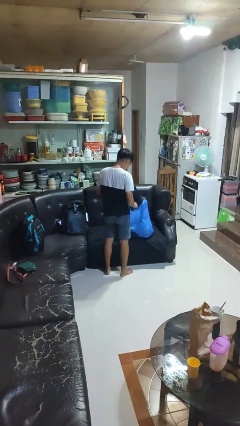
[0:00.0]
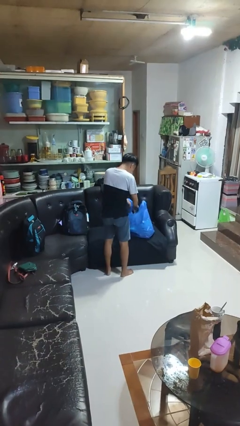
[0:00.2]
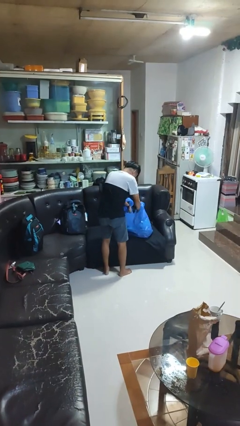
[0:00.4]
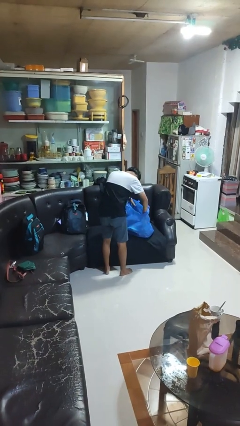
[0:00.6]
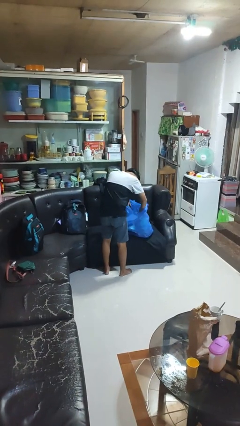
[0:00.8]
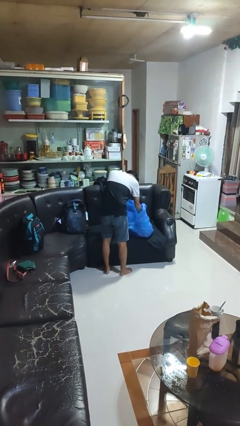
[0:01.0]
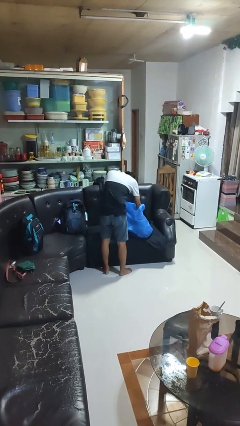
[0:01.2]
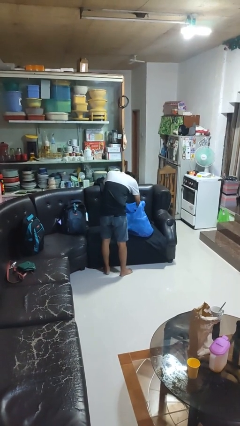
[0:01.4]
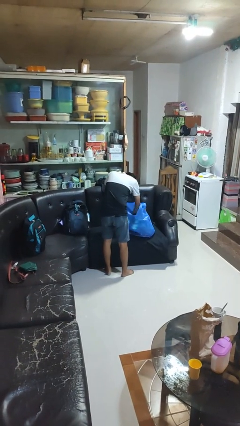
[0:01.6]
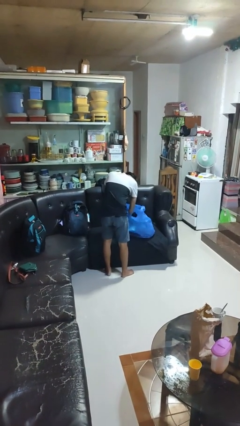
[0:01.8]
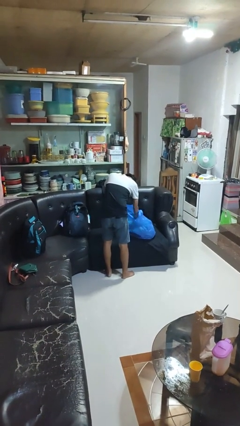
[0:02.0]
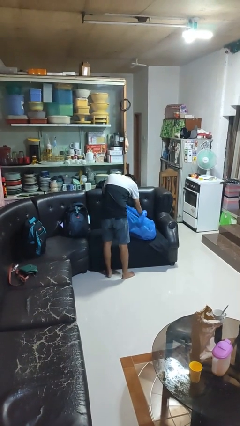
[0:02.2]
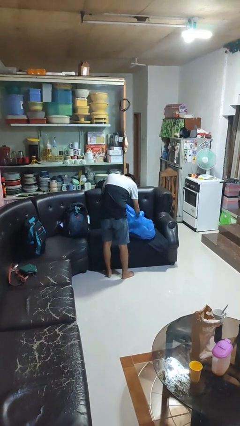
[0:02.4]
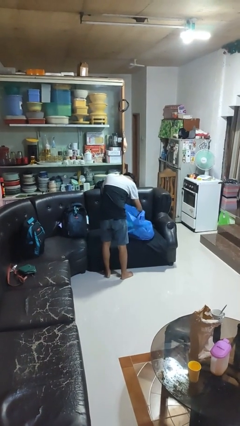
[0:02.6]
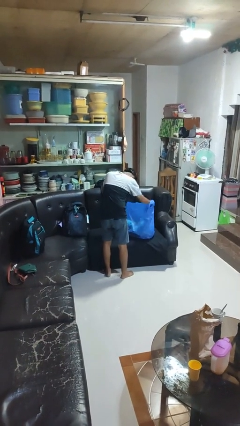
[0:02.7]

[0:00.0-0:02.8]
person searches in bag

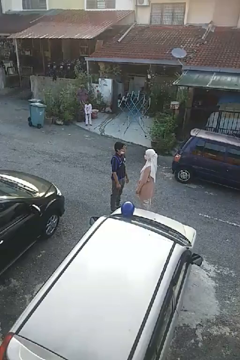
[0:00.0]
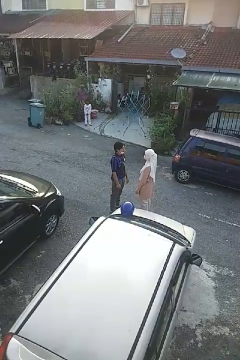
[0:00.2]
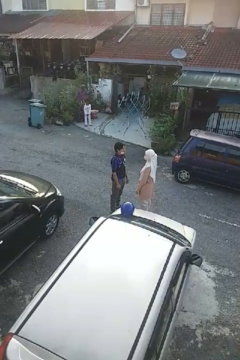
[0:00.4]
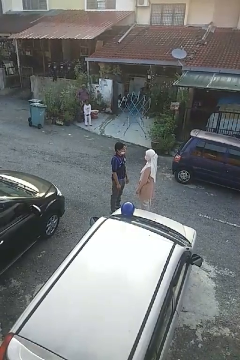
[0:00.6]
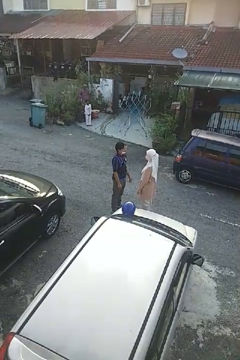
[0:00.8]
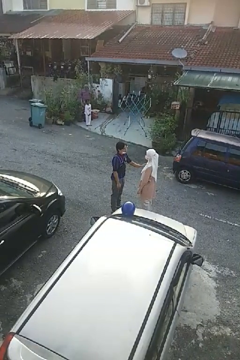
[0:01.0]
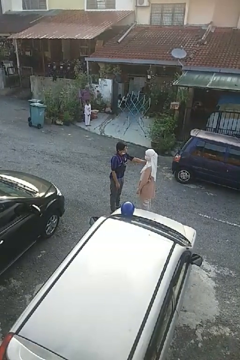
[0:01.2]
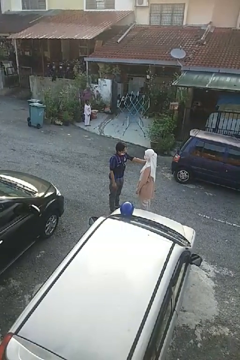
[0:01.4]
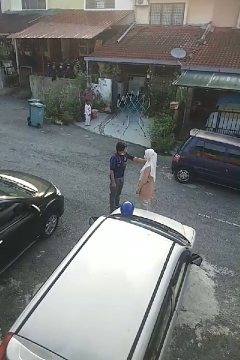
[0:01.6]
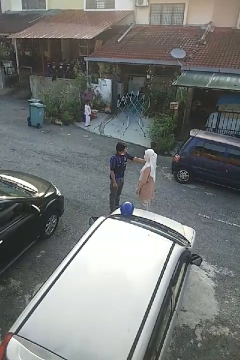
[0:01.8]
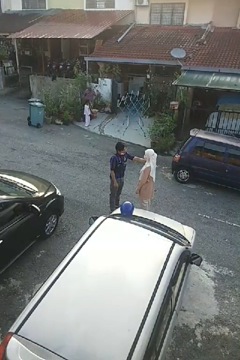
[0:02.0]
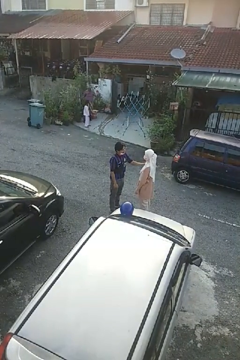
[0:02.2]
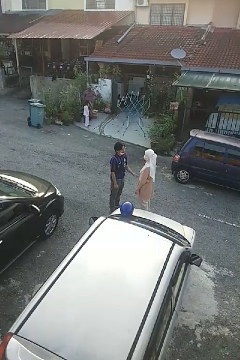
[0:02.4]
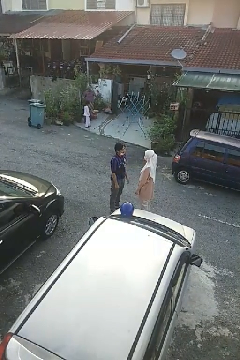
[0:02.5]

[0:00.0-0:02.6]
person pounds shoulders of person

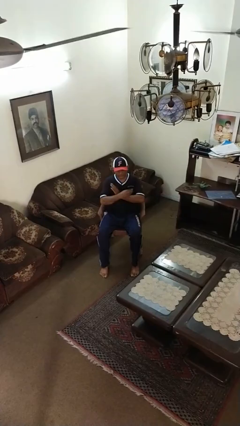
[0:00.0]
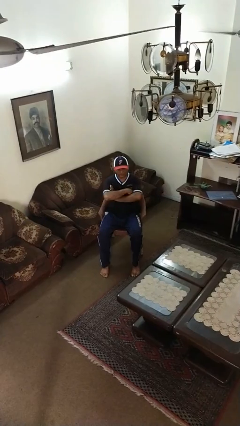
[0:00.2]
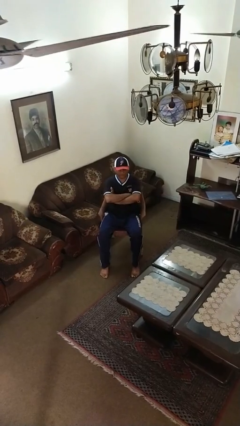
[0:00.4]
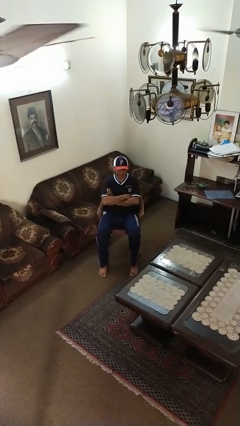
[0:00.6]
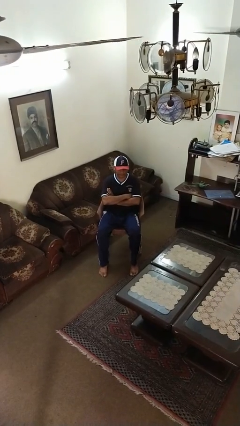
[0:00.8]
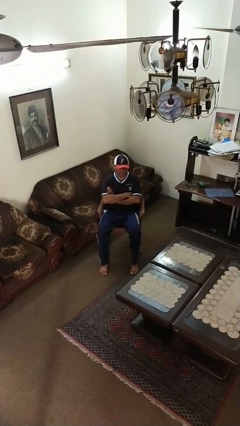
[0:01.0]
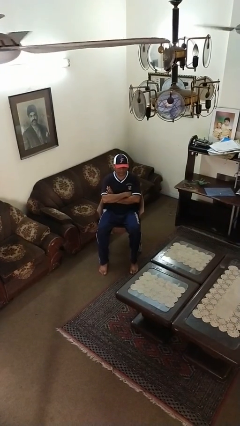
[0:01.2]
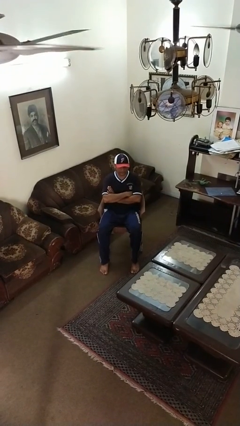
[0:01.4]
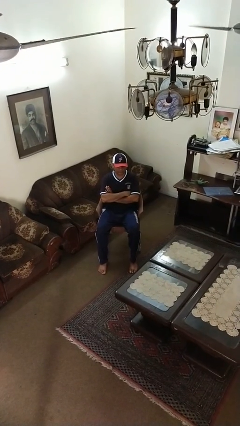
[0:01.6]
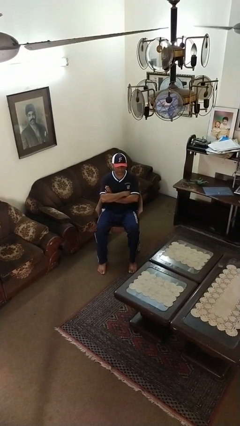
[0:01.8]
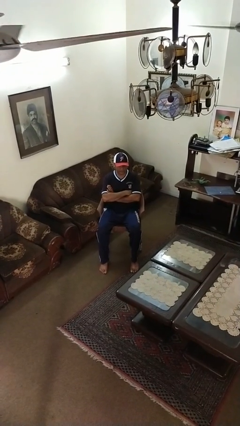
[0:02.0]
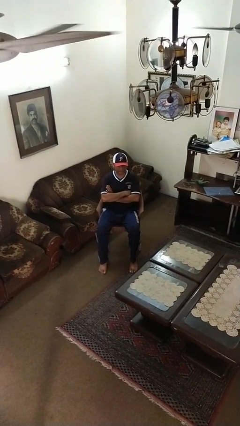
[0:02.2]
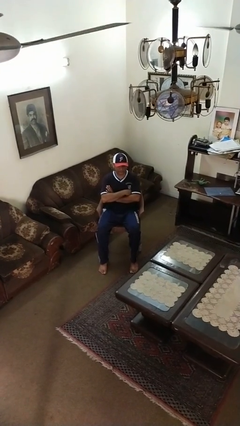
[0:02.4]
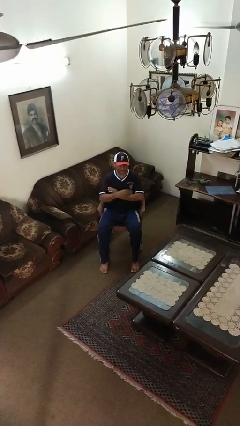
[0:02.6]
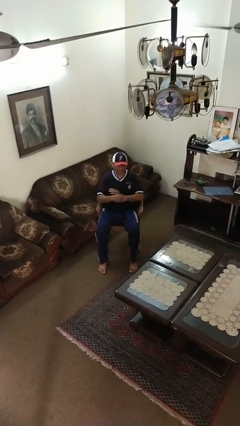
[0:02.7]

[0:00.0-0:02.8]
person crosses arms

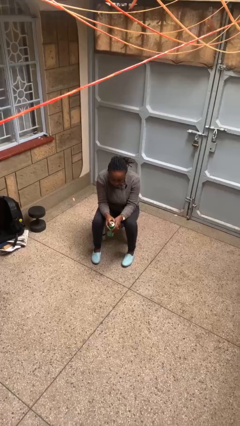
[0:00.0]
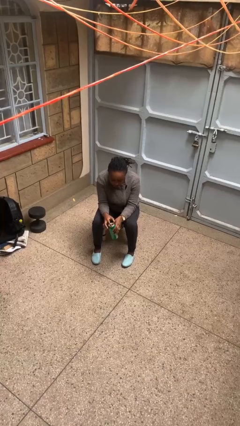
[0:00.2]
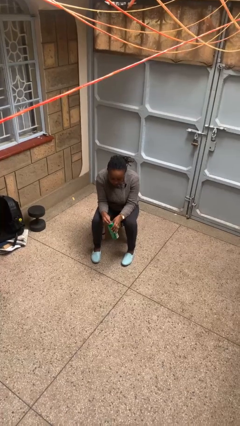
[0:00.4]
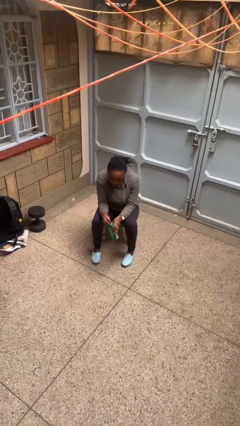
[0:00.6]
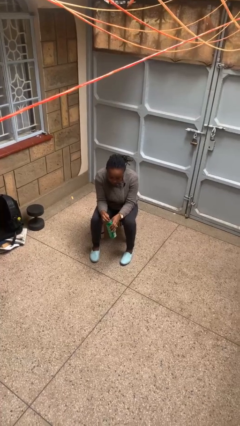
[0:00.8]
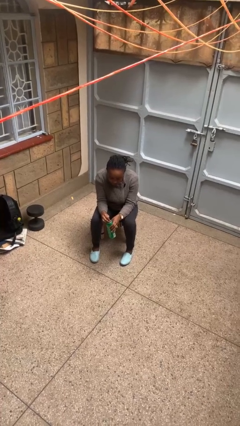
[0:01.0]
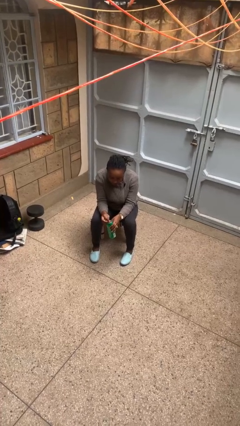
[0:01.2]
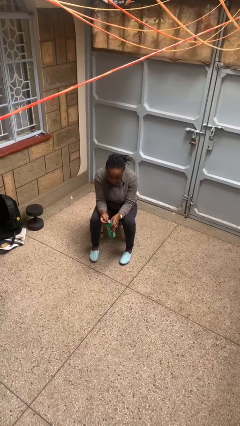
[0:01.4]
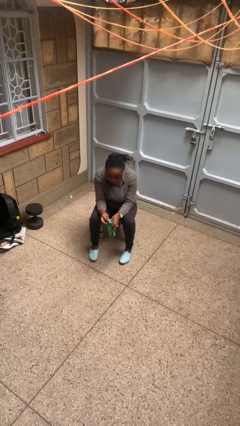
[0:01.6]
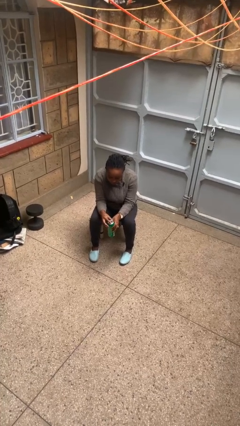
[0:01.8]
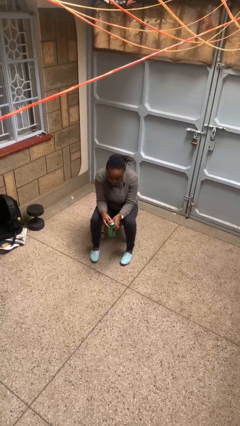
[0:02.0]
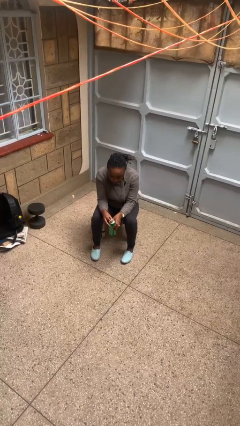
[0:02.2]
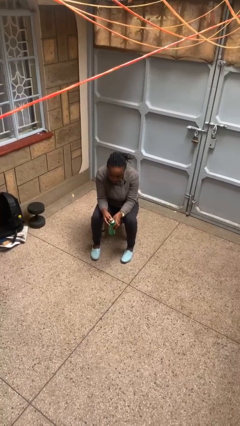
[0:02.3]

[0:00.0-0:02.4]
person opens beverage can

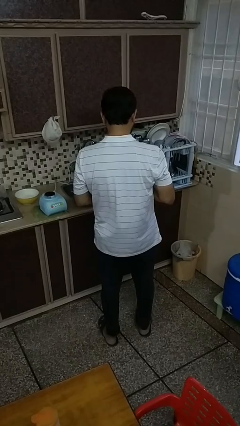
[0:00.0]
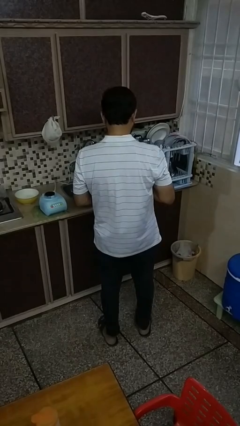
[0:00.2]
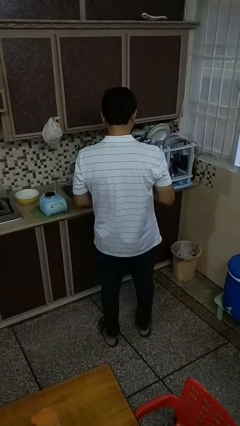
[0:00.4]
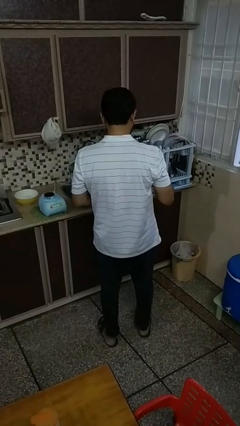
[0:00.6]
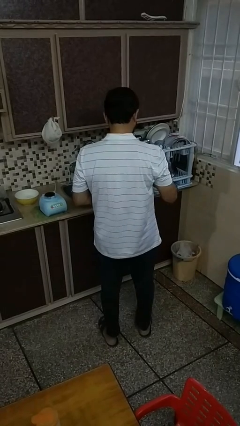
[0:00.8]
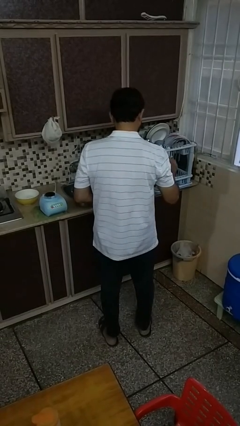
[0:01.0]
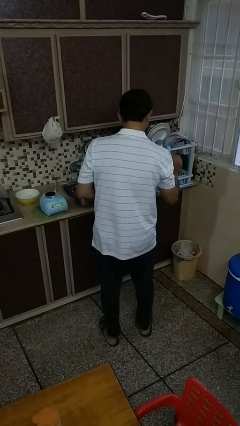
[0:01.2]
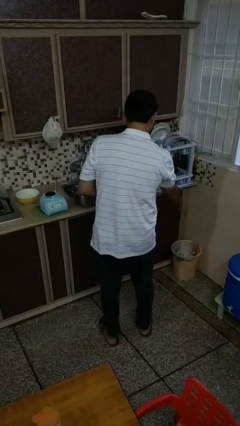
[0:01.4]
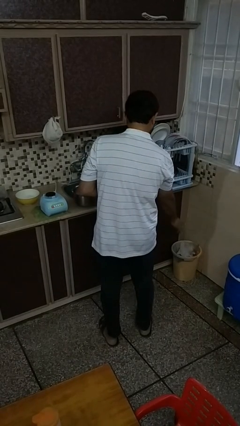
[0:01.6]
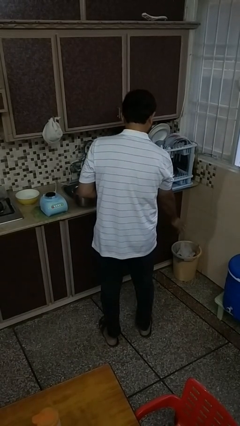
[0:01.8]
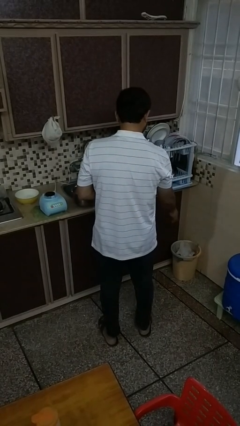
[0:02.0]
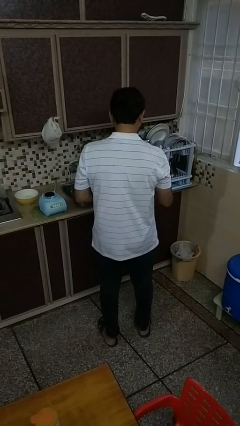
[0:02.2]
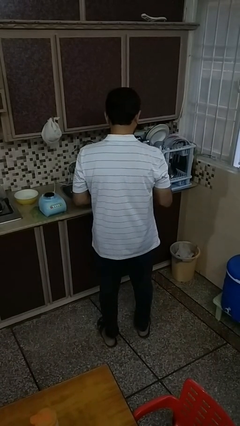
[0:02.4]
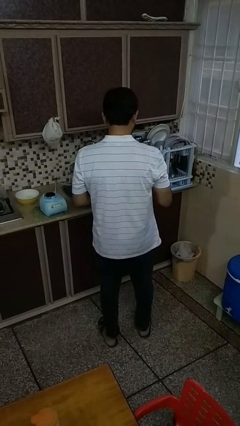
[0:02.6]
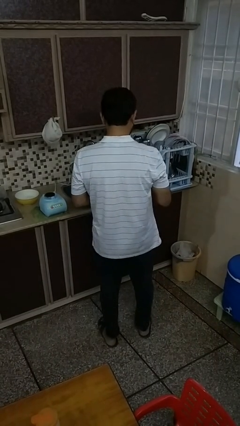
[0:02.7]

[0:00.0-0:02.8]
person discards trash

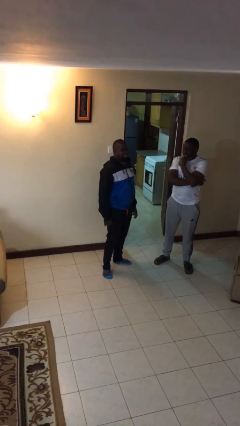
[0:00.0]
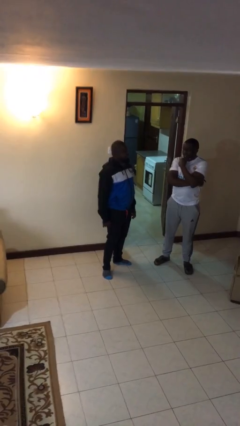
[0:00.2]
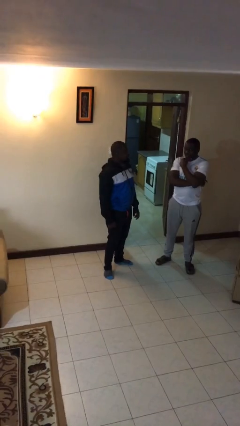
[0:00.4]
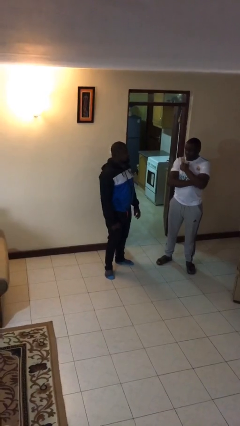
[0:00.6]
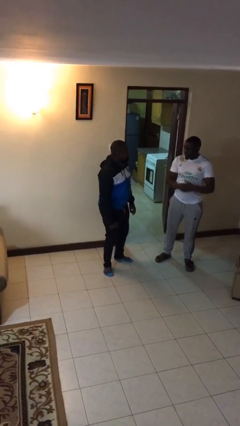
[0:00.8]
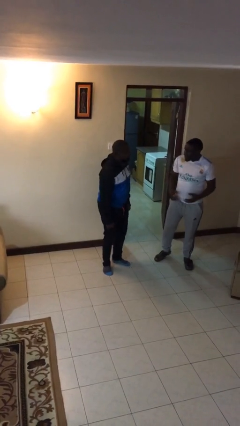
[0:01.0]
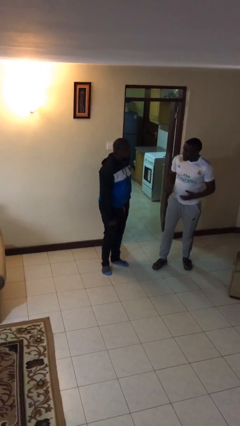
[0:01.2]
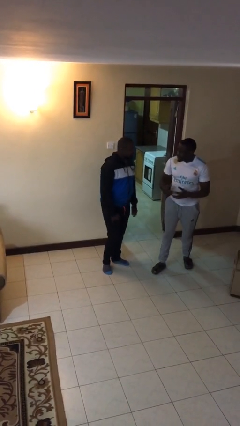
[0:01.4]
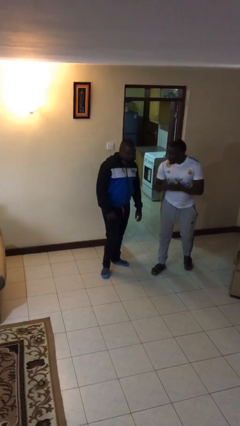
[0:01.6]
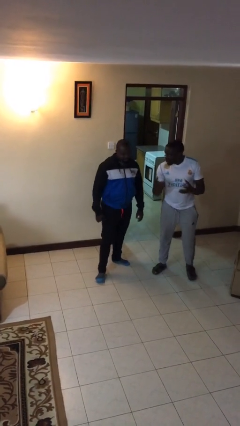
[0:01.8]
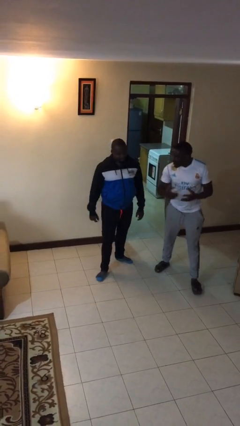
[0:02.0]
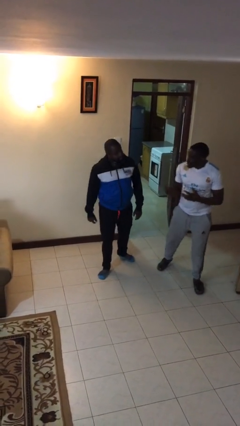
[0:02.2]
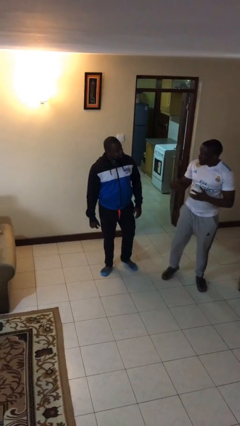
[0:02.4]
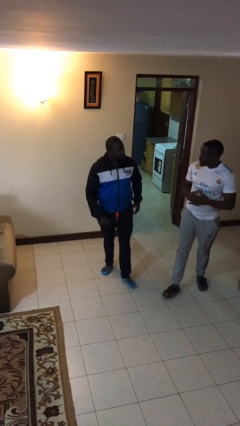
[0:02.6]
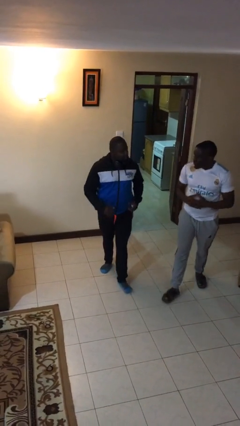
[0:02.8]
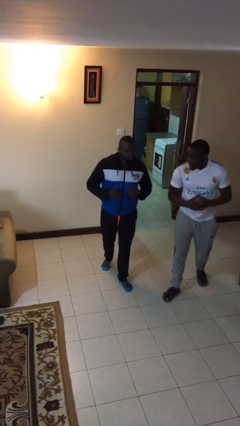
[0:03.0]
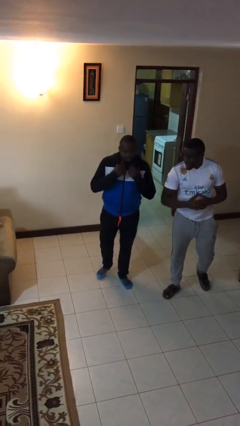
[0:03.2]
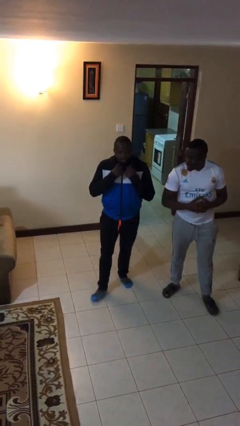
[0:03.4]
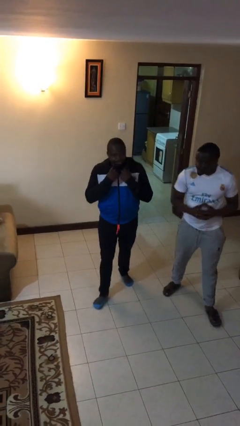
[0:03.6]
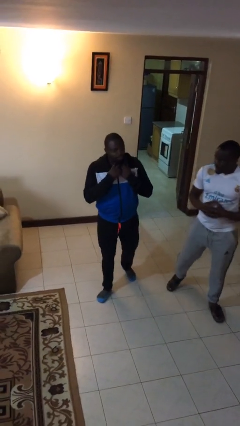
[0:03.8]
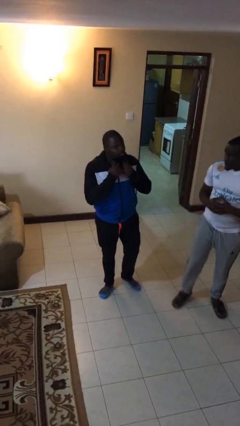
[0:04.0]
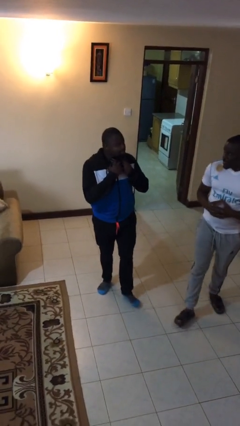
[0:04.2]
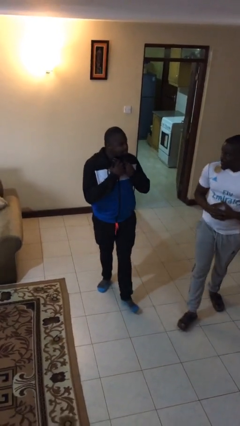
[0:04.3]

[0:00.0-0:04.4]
person talks to person
